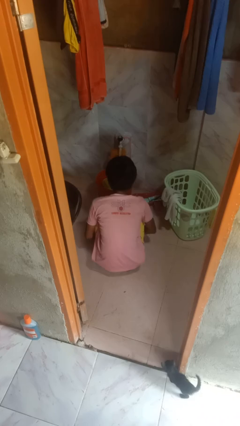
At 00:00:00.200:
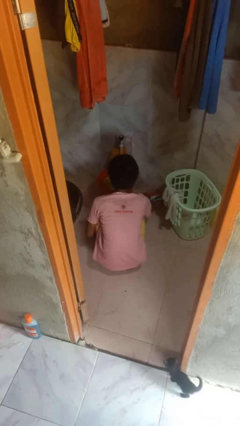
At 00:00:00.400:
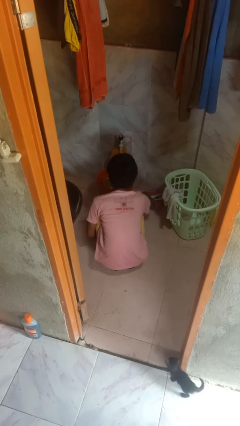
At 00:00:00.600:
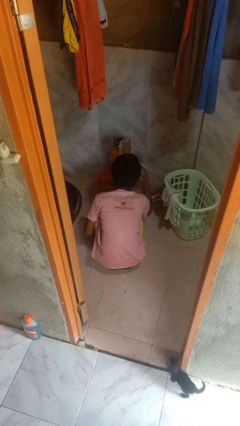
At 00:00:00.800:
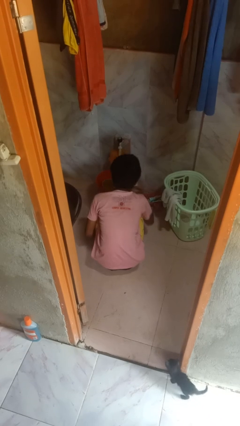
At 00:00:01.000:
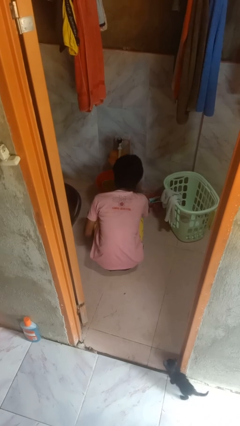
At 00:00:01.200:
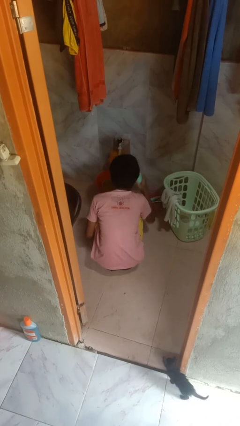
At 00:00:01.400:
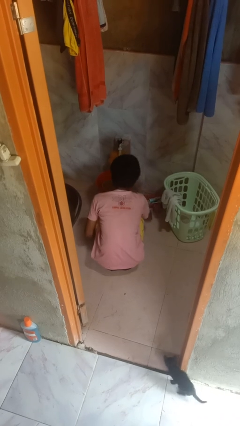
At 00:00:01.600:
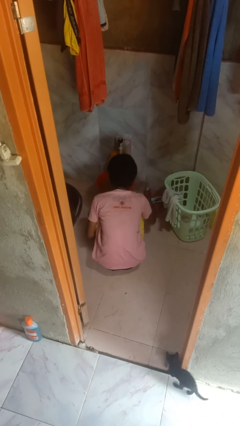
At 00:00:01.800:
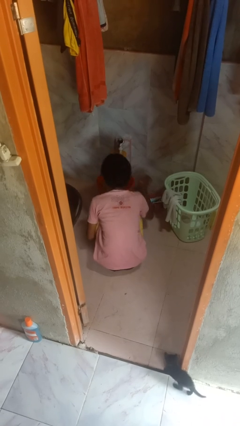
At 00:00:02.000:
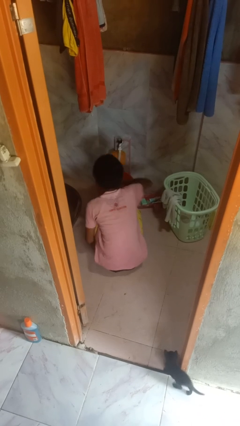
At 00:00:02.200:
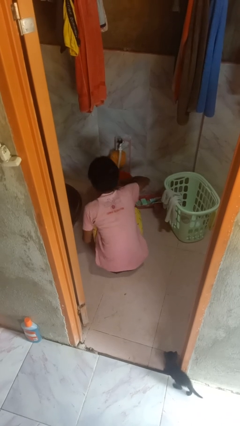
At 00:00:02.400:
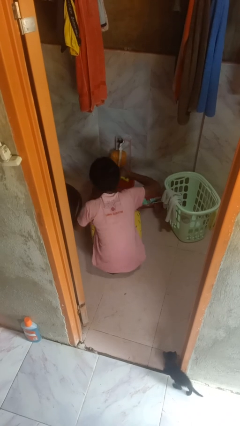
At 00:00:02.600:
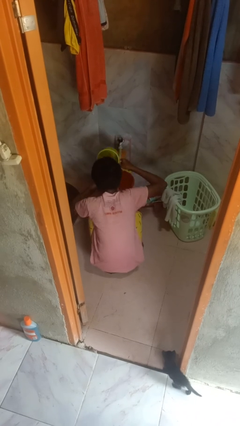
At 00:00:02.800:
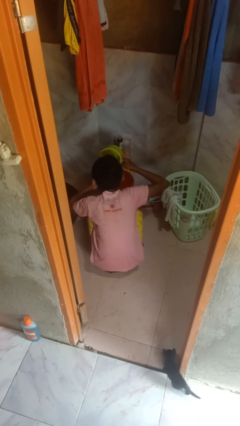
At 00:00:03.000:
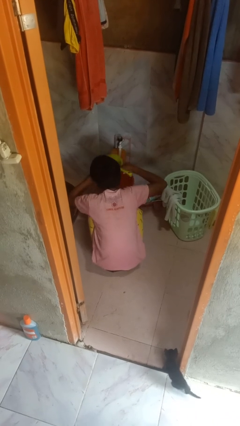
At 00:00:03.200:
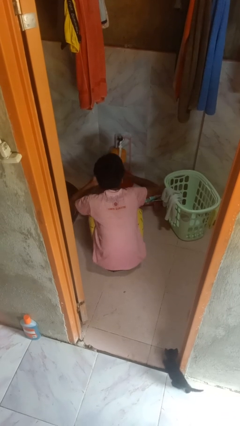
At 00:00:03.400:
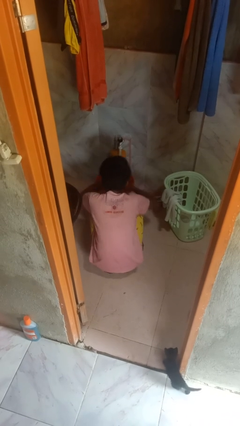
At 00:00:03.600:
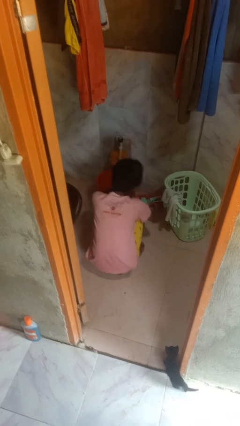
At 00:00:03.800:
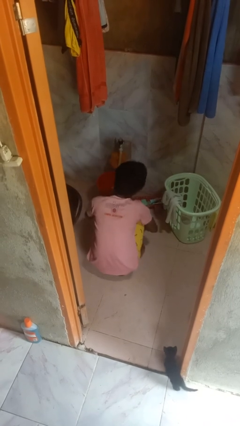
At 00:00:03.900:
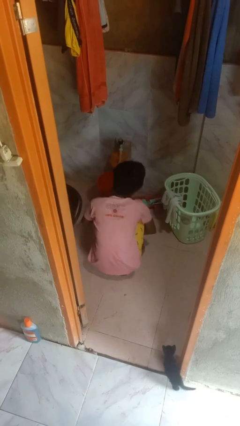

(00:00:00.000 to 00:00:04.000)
person washes face

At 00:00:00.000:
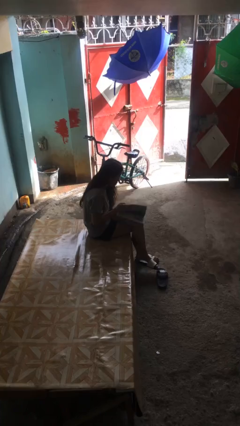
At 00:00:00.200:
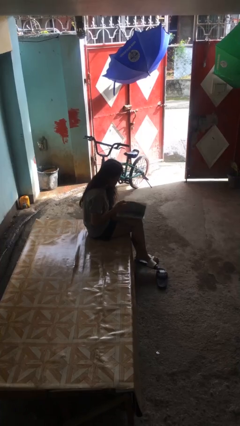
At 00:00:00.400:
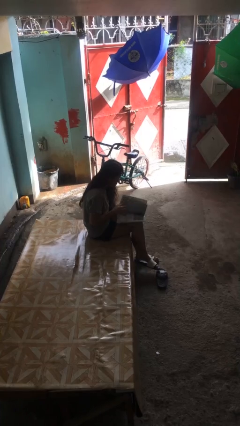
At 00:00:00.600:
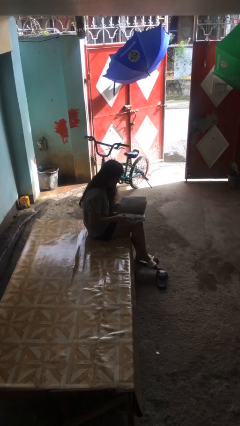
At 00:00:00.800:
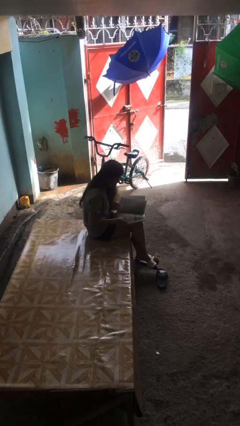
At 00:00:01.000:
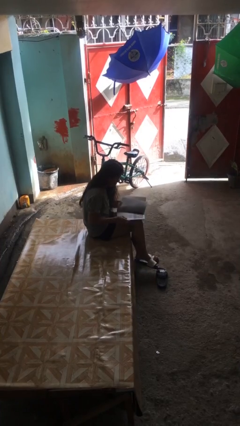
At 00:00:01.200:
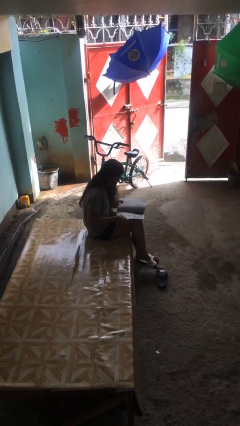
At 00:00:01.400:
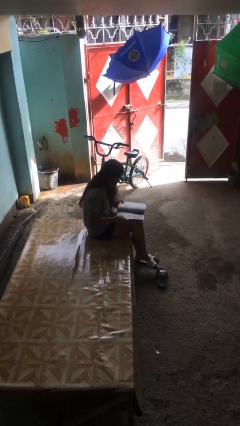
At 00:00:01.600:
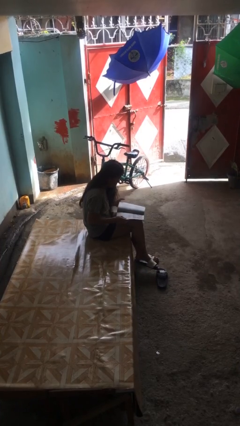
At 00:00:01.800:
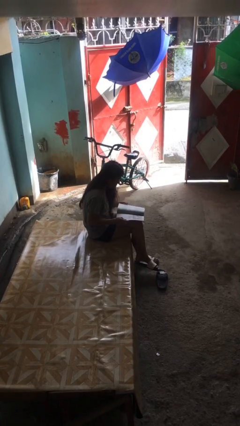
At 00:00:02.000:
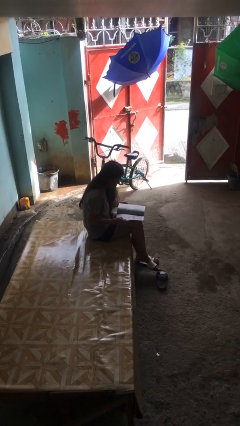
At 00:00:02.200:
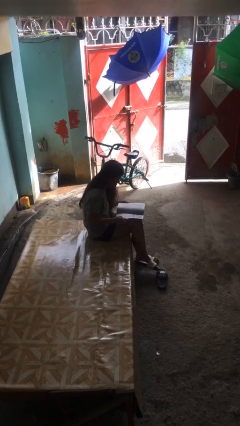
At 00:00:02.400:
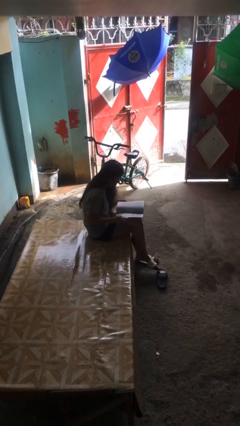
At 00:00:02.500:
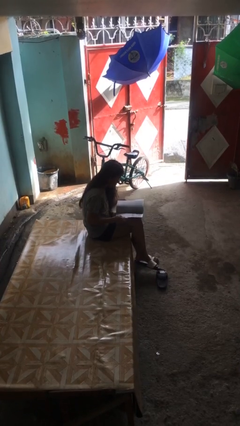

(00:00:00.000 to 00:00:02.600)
person reads document

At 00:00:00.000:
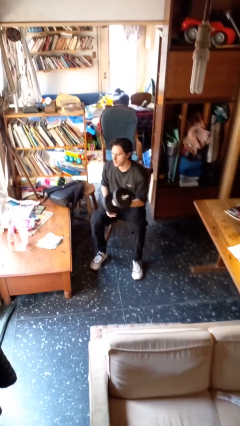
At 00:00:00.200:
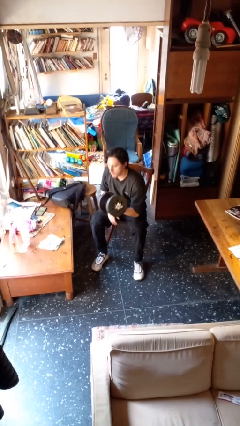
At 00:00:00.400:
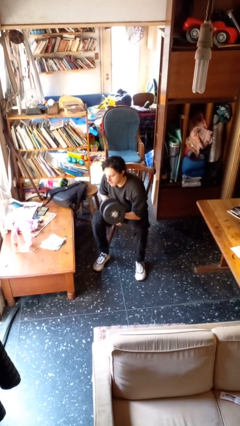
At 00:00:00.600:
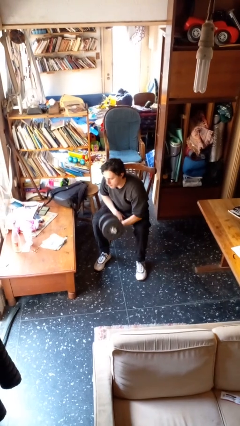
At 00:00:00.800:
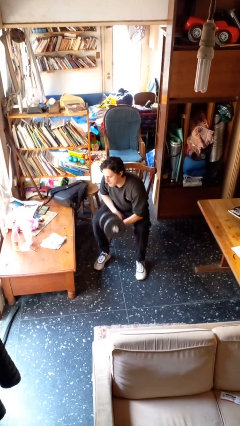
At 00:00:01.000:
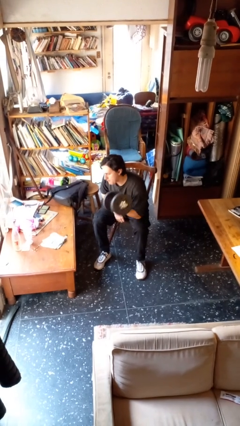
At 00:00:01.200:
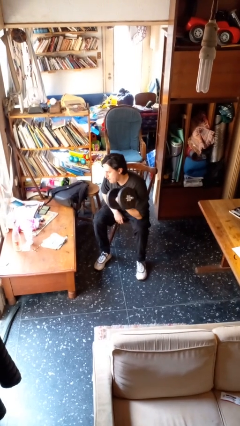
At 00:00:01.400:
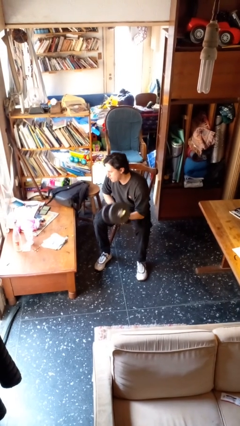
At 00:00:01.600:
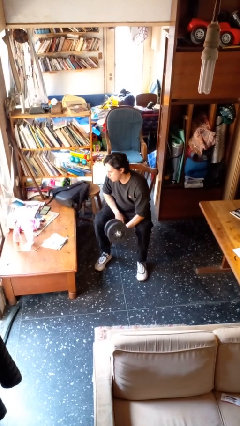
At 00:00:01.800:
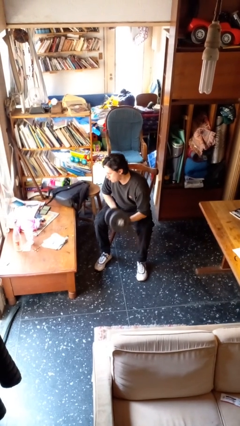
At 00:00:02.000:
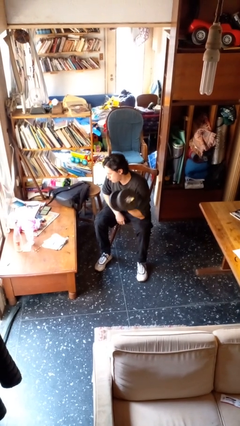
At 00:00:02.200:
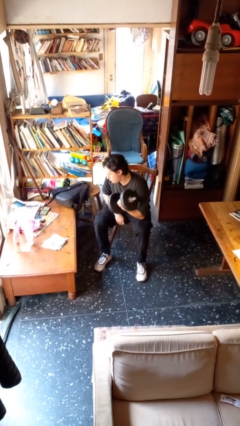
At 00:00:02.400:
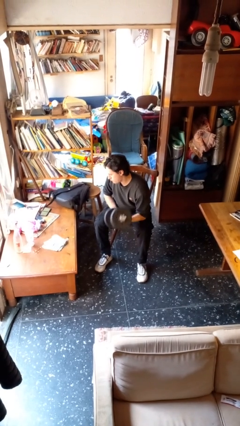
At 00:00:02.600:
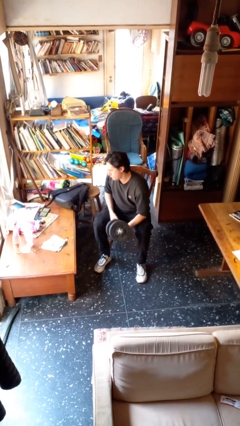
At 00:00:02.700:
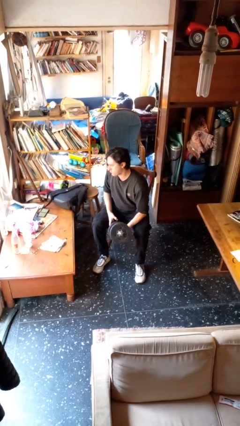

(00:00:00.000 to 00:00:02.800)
person lifts dumbbells

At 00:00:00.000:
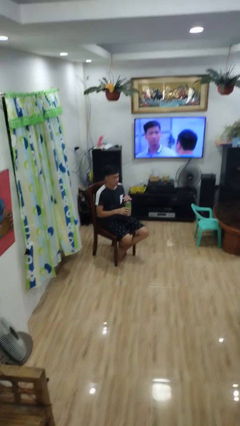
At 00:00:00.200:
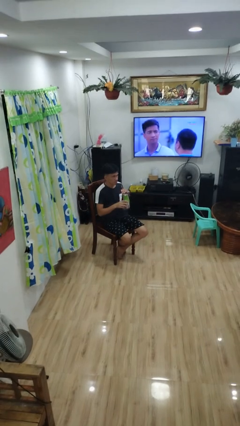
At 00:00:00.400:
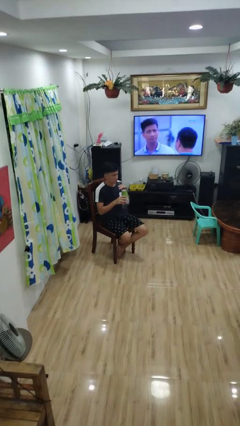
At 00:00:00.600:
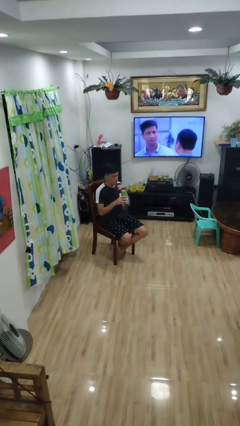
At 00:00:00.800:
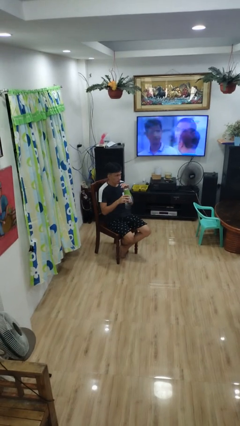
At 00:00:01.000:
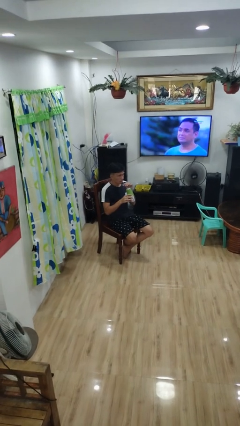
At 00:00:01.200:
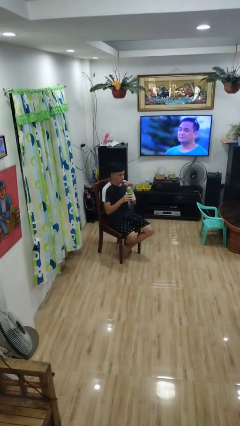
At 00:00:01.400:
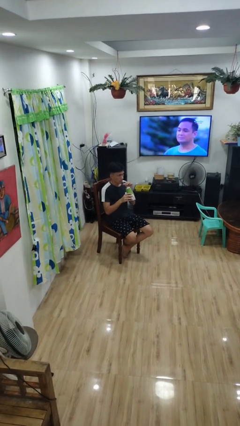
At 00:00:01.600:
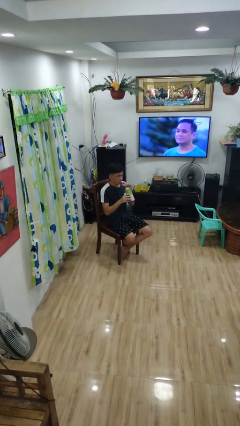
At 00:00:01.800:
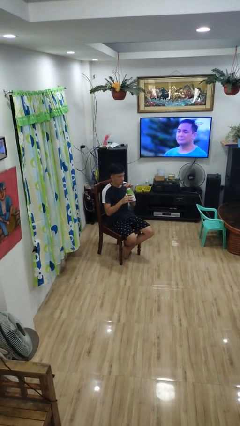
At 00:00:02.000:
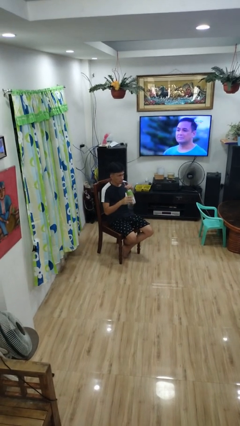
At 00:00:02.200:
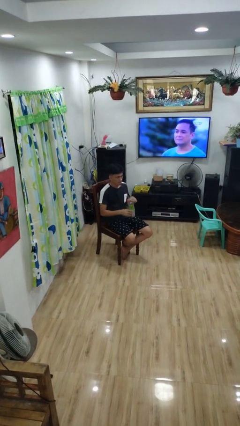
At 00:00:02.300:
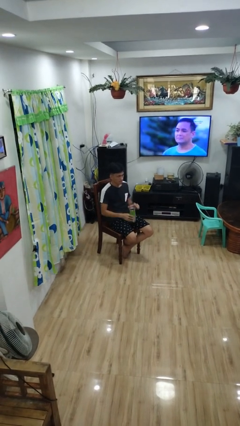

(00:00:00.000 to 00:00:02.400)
person drinks from straw

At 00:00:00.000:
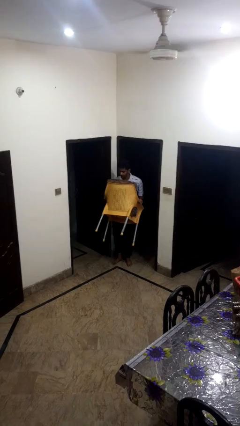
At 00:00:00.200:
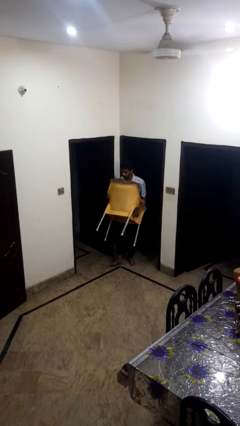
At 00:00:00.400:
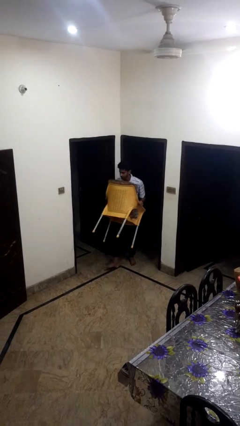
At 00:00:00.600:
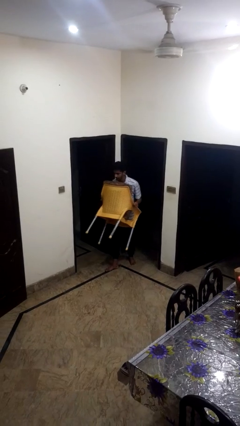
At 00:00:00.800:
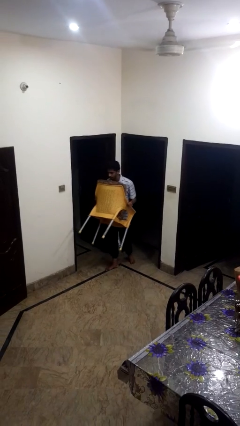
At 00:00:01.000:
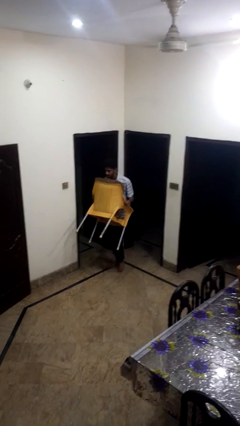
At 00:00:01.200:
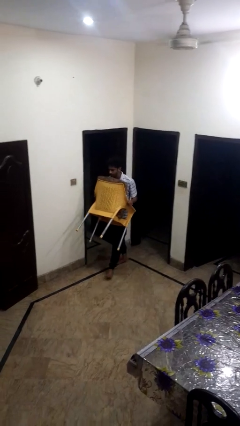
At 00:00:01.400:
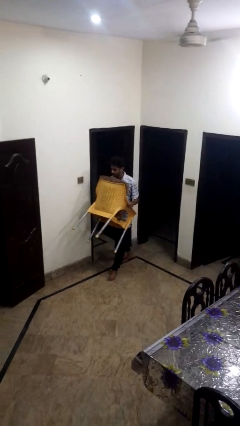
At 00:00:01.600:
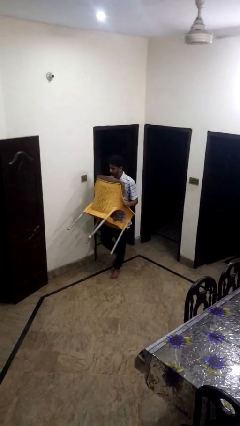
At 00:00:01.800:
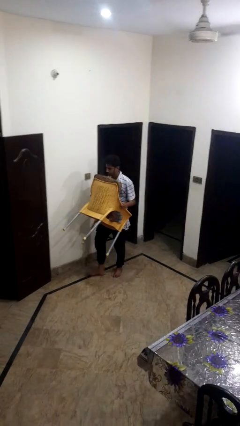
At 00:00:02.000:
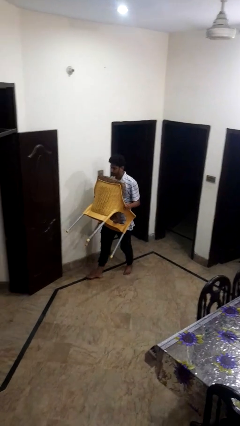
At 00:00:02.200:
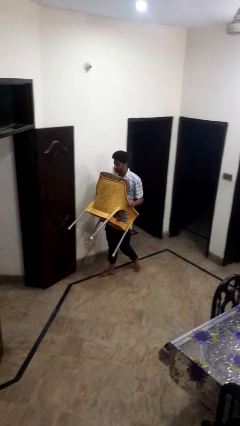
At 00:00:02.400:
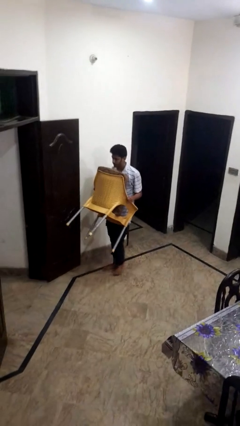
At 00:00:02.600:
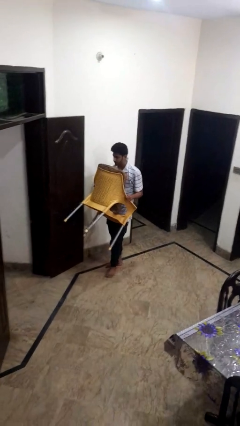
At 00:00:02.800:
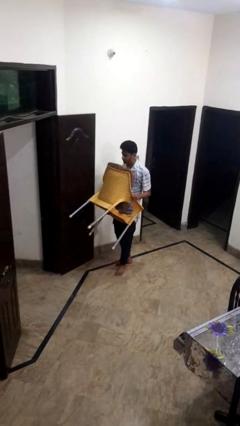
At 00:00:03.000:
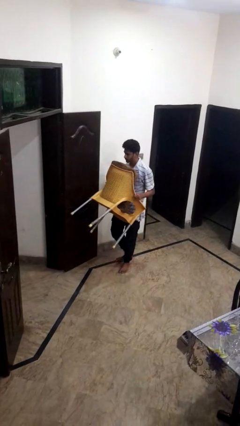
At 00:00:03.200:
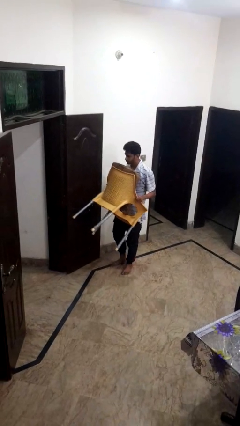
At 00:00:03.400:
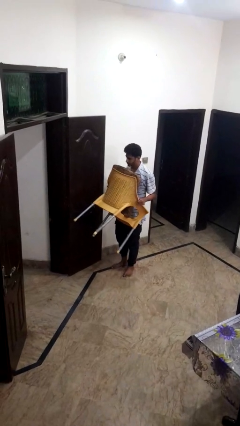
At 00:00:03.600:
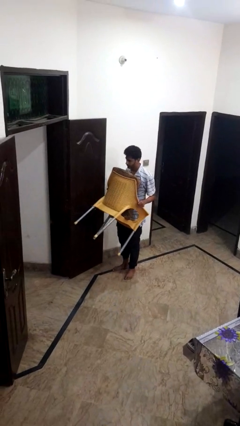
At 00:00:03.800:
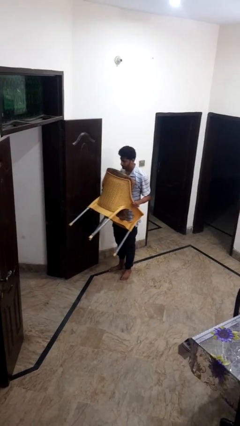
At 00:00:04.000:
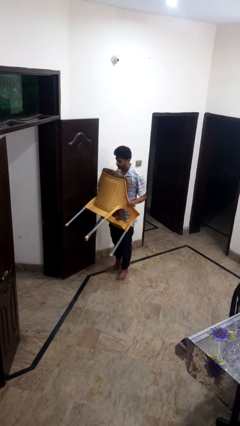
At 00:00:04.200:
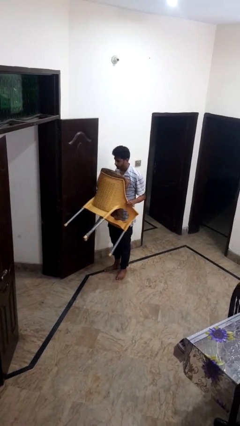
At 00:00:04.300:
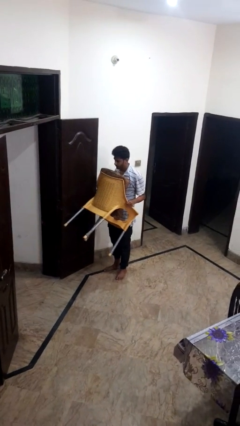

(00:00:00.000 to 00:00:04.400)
person carries furniture

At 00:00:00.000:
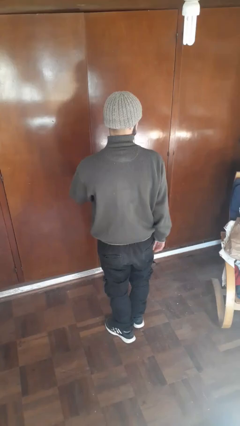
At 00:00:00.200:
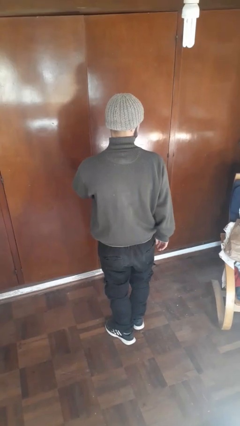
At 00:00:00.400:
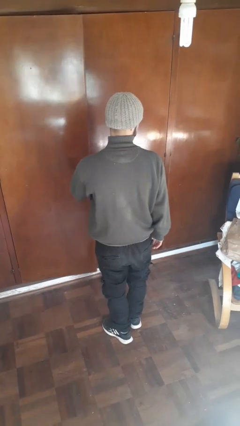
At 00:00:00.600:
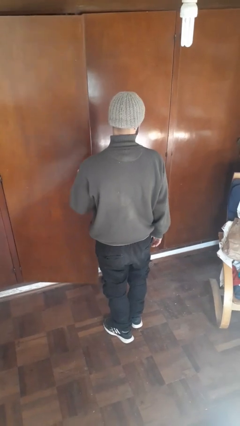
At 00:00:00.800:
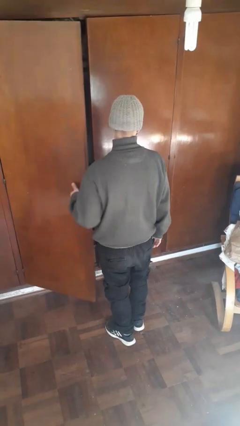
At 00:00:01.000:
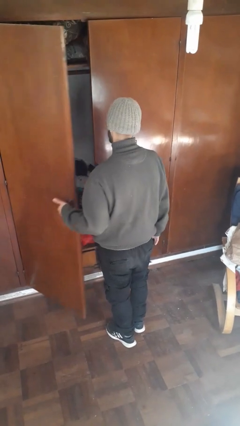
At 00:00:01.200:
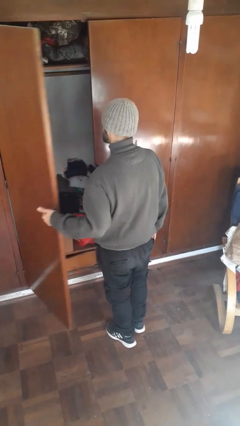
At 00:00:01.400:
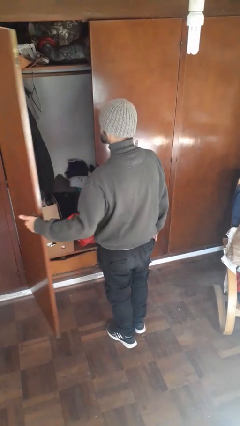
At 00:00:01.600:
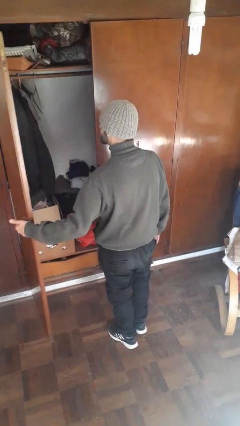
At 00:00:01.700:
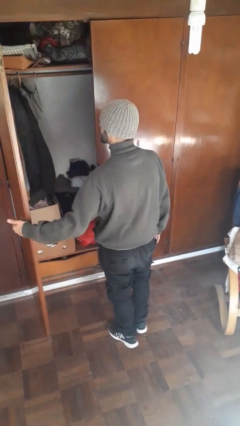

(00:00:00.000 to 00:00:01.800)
person opens closet door
